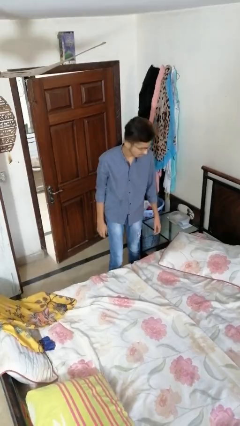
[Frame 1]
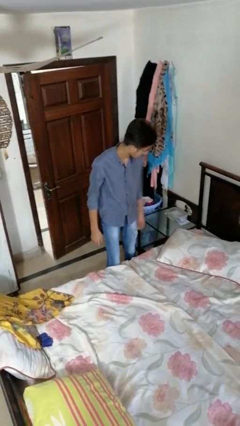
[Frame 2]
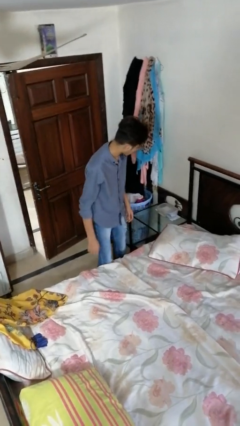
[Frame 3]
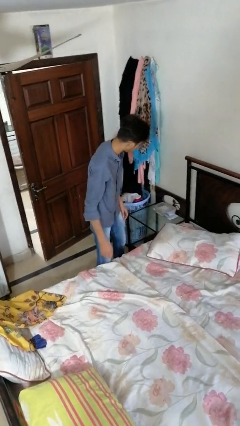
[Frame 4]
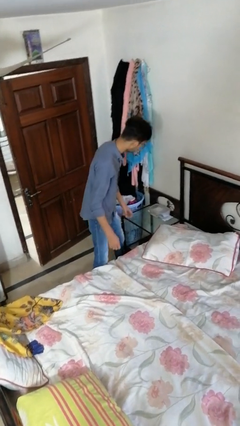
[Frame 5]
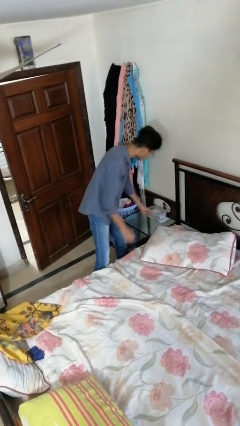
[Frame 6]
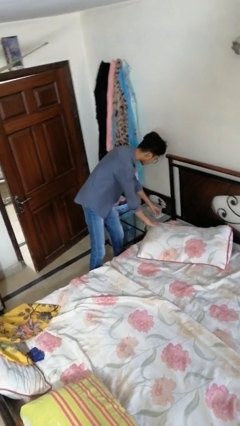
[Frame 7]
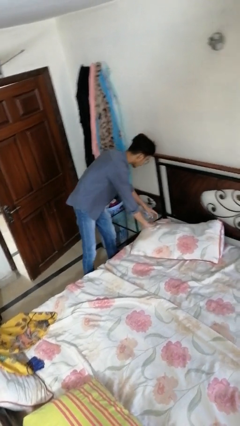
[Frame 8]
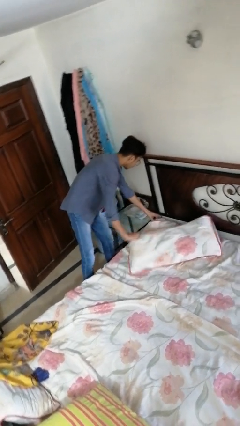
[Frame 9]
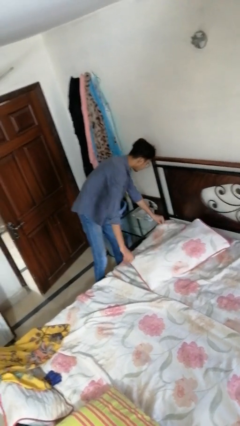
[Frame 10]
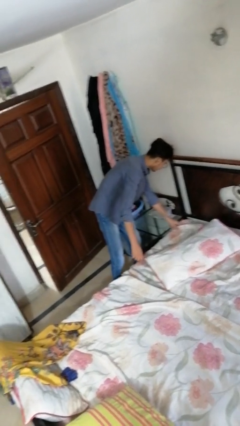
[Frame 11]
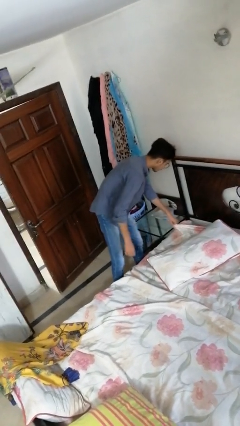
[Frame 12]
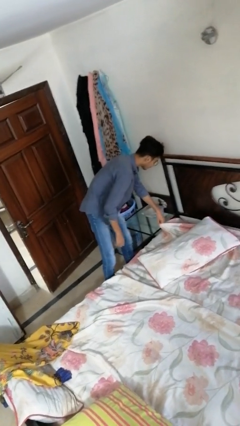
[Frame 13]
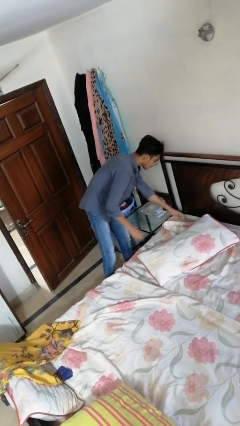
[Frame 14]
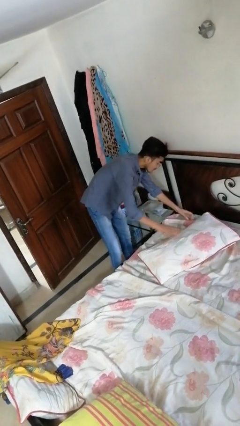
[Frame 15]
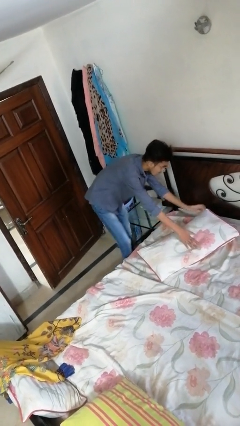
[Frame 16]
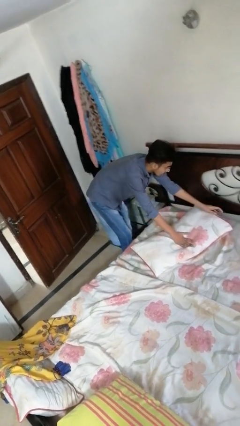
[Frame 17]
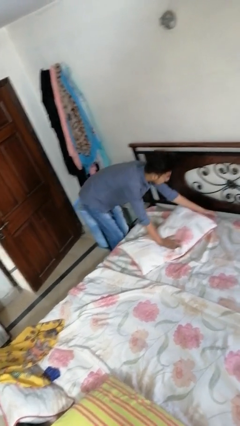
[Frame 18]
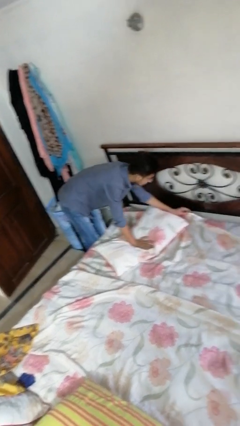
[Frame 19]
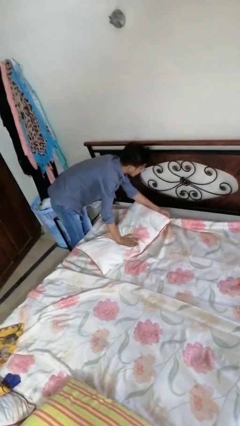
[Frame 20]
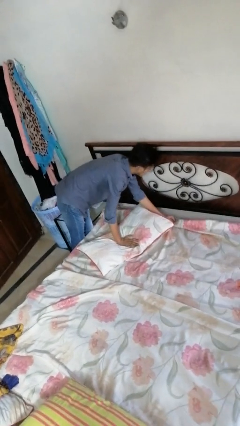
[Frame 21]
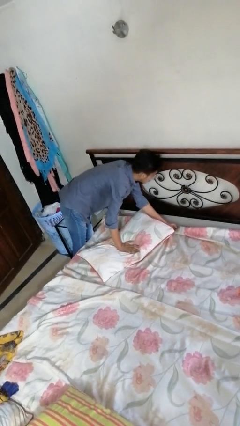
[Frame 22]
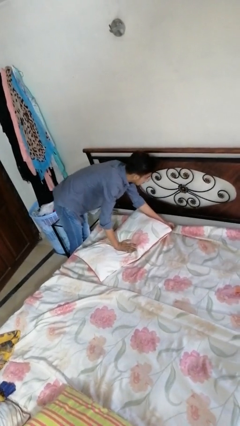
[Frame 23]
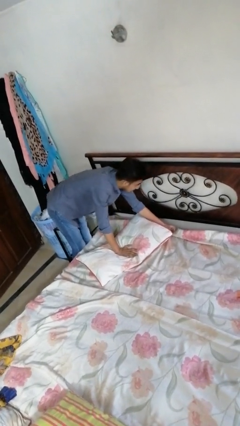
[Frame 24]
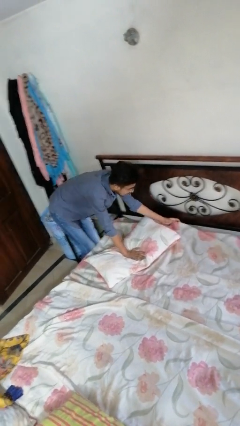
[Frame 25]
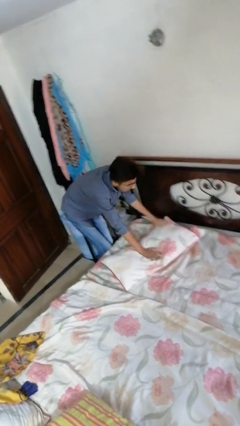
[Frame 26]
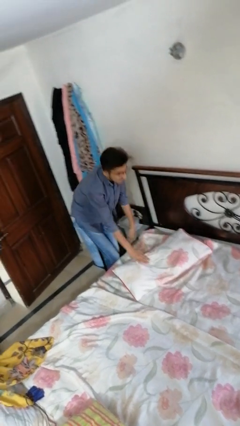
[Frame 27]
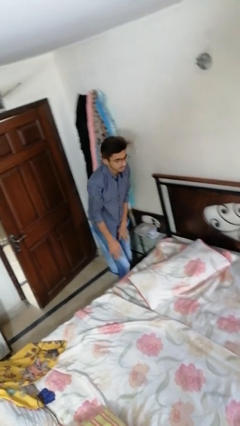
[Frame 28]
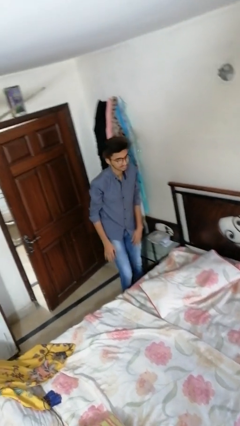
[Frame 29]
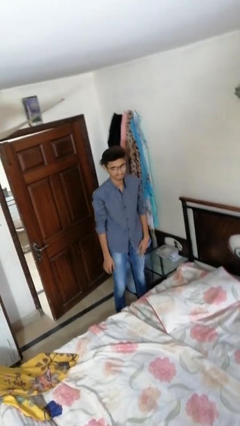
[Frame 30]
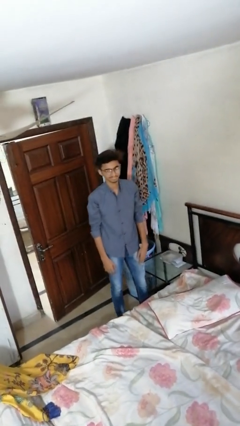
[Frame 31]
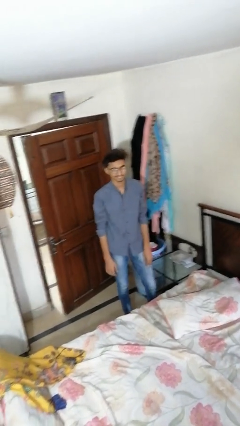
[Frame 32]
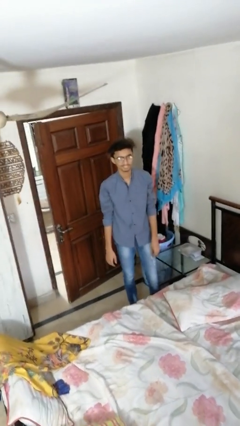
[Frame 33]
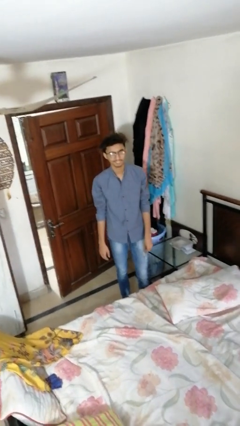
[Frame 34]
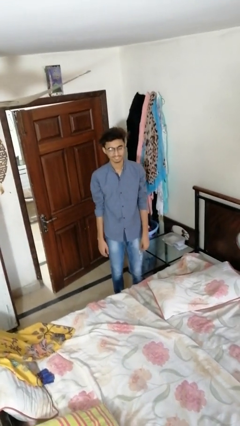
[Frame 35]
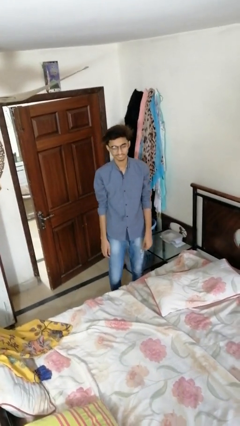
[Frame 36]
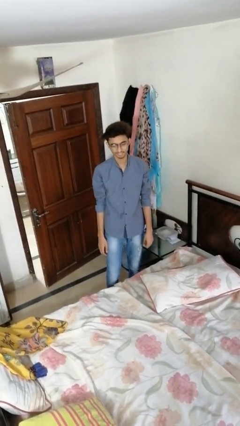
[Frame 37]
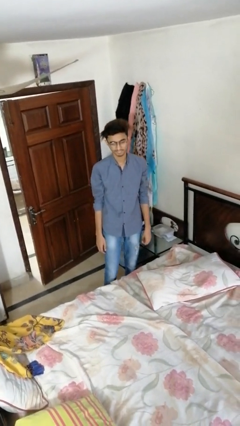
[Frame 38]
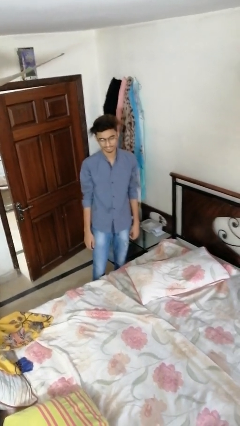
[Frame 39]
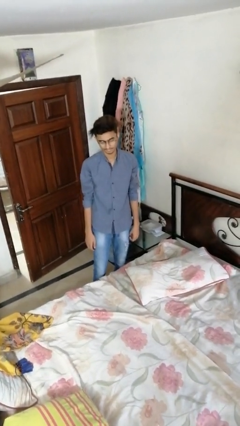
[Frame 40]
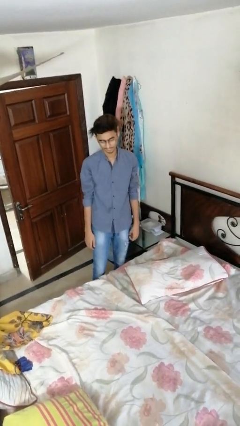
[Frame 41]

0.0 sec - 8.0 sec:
person searches under bed

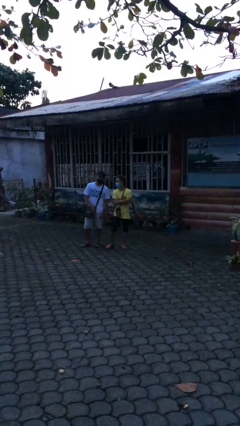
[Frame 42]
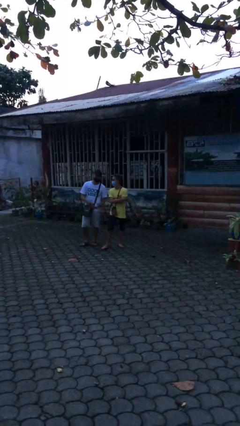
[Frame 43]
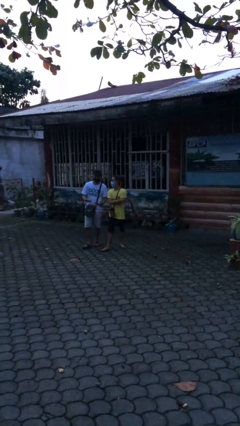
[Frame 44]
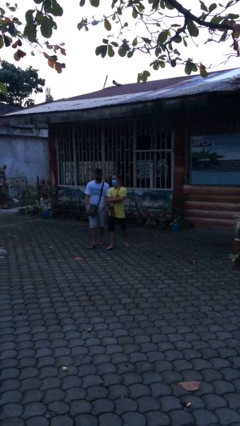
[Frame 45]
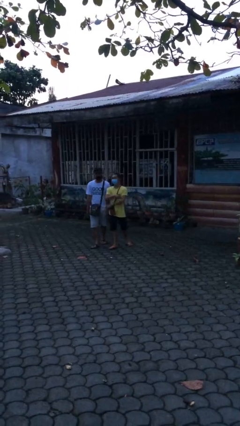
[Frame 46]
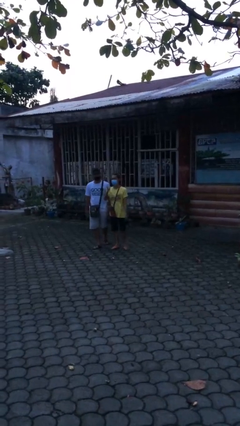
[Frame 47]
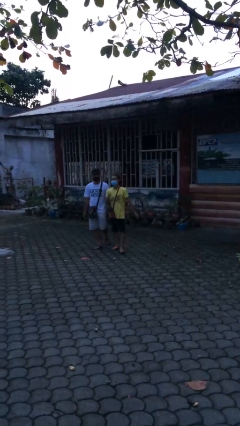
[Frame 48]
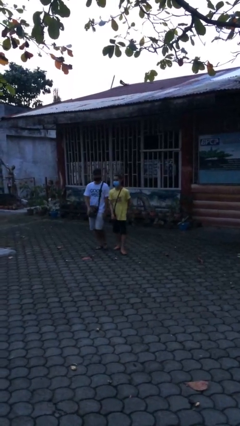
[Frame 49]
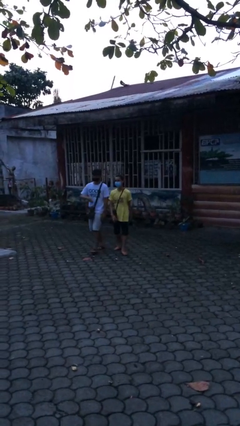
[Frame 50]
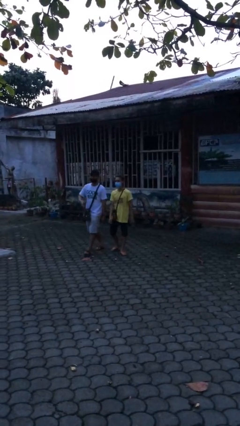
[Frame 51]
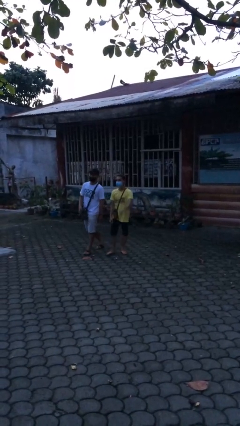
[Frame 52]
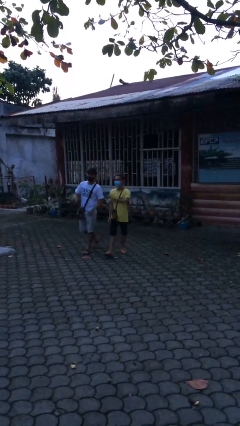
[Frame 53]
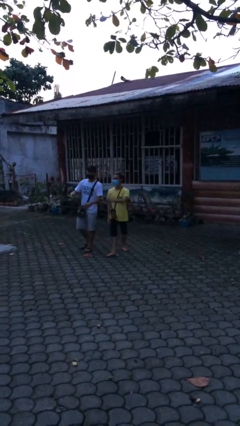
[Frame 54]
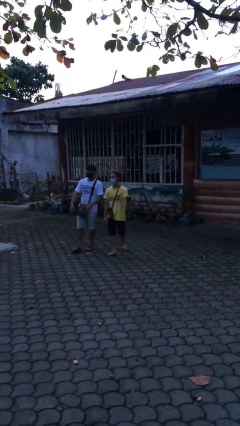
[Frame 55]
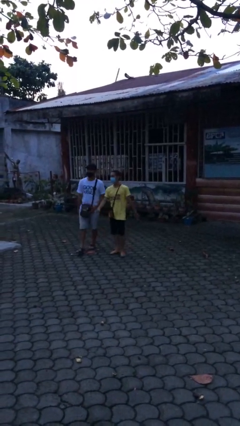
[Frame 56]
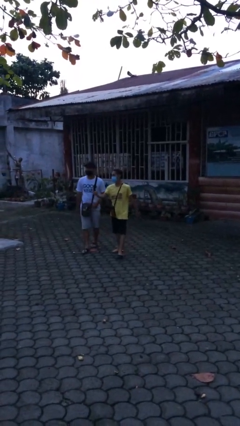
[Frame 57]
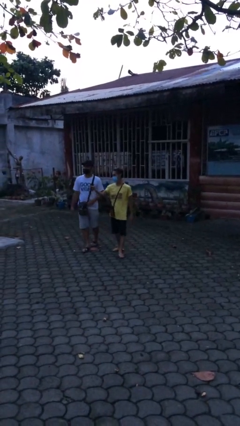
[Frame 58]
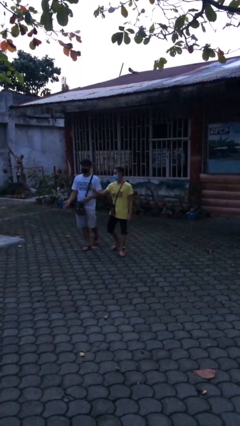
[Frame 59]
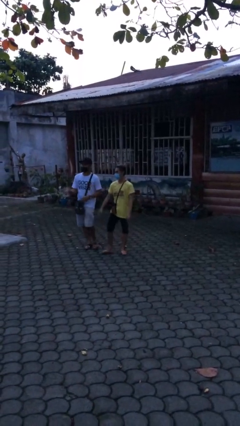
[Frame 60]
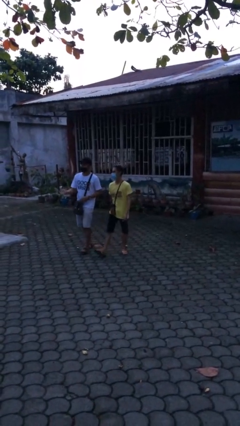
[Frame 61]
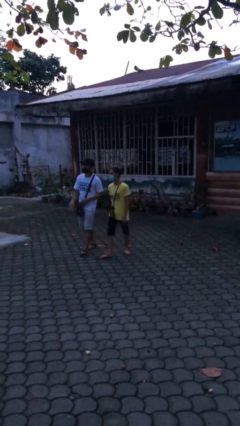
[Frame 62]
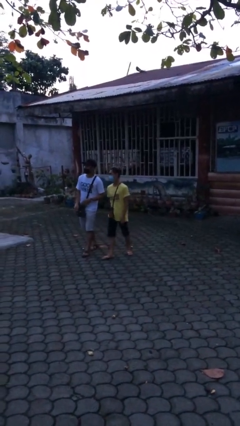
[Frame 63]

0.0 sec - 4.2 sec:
person talks to person

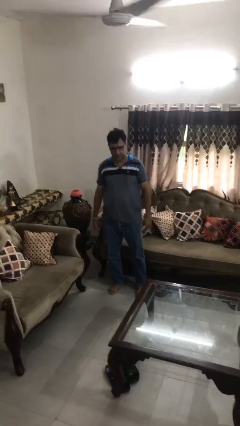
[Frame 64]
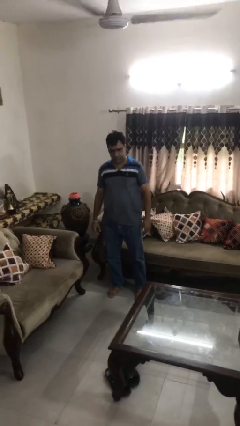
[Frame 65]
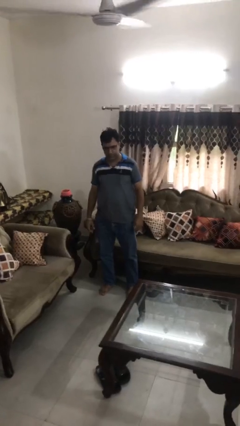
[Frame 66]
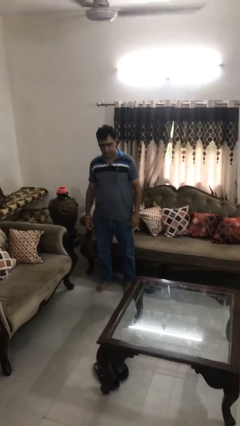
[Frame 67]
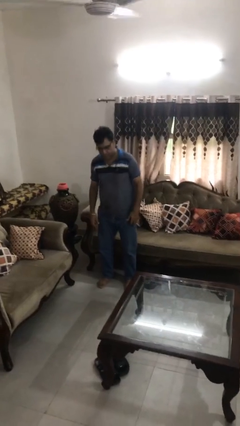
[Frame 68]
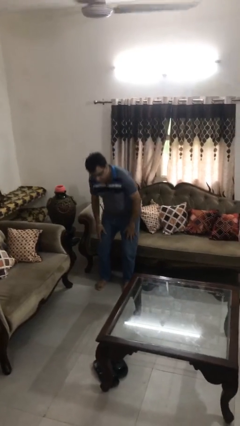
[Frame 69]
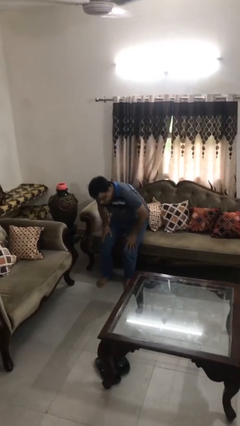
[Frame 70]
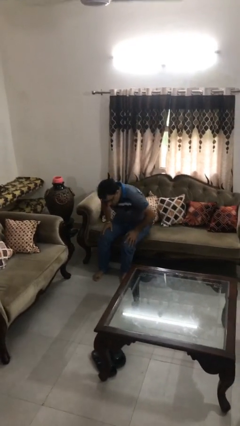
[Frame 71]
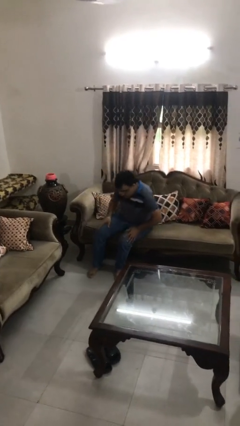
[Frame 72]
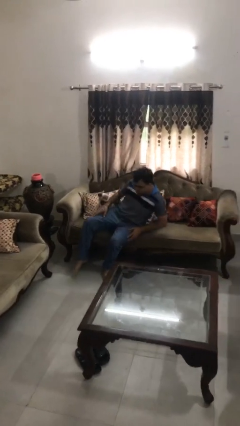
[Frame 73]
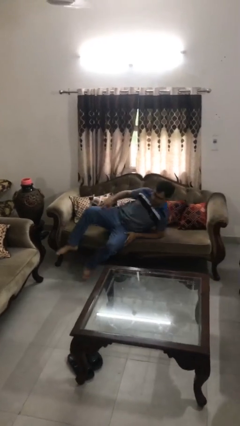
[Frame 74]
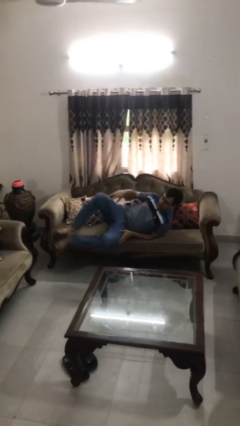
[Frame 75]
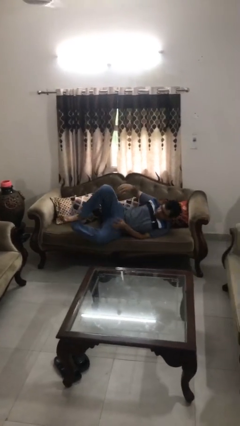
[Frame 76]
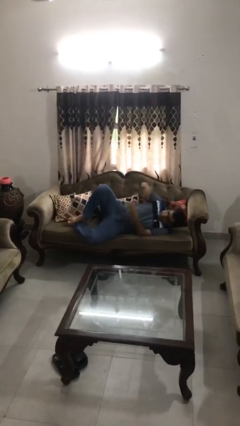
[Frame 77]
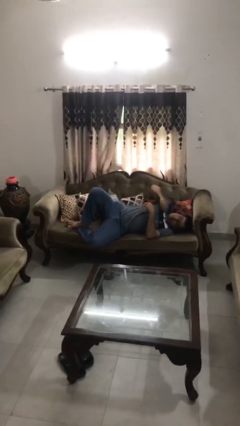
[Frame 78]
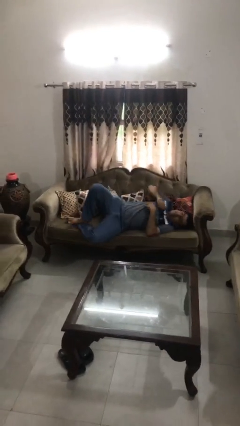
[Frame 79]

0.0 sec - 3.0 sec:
person lies down on couch

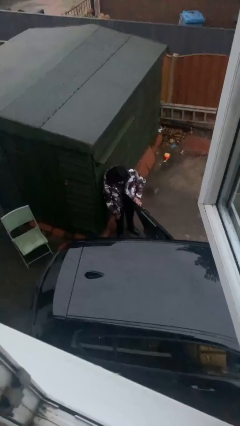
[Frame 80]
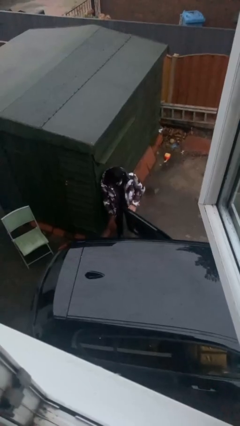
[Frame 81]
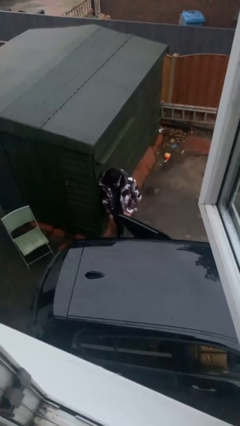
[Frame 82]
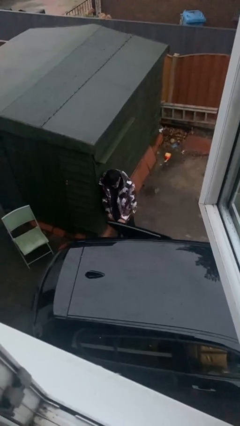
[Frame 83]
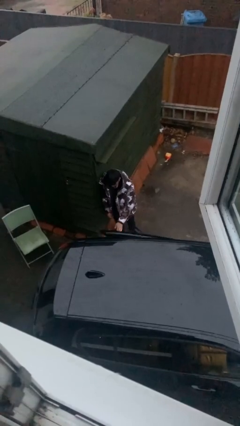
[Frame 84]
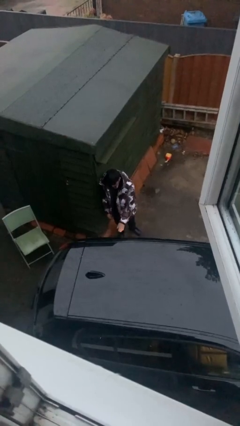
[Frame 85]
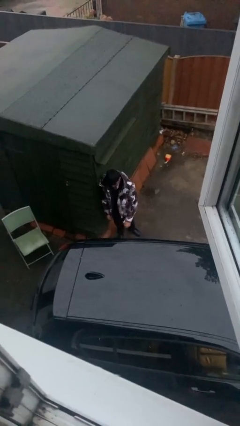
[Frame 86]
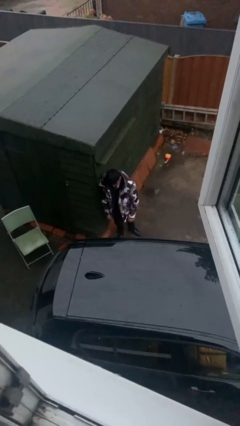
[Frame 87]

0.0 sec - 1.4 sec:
person closes car door

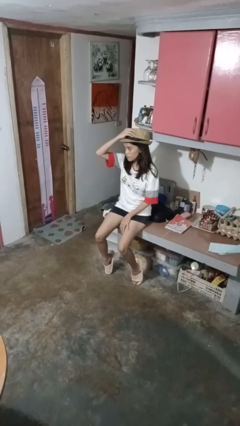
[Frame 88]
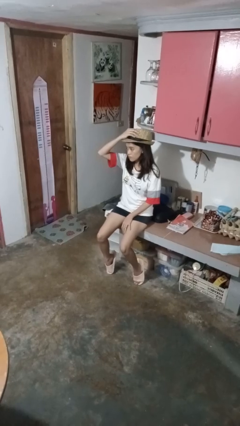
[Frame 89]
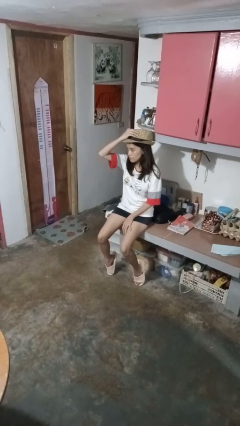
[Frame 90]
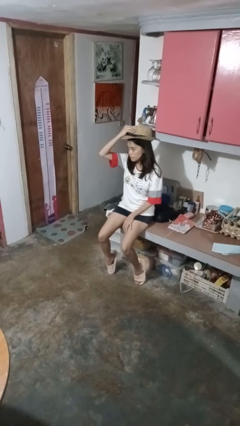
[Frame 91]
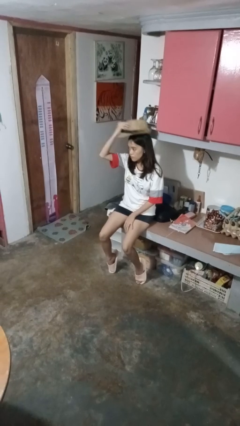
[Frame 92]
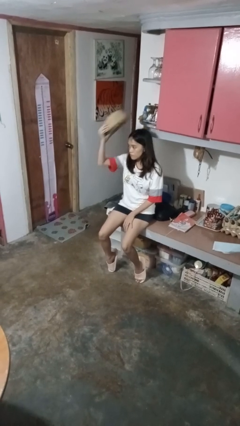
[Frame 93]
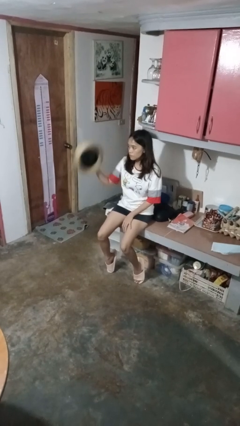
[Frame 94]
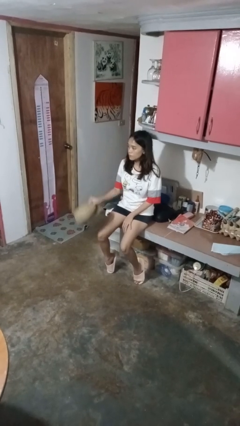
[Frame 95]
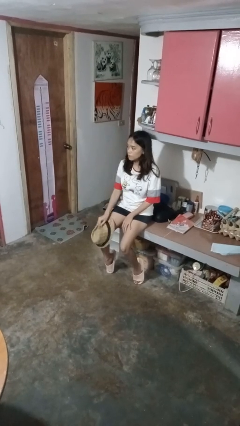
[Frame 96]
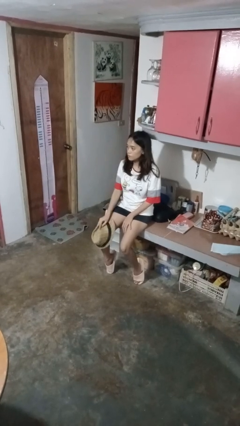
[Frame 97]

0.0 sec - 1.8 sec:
person takes off hat
